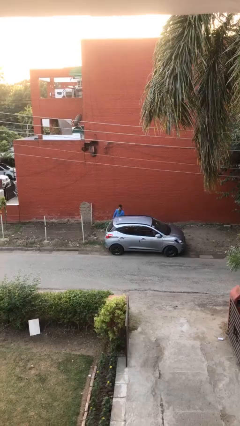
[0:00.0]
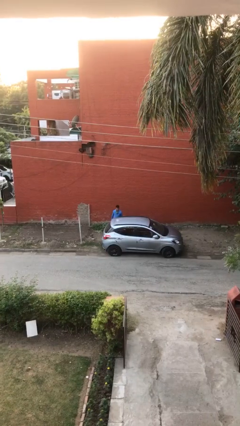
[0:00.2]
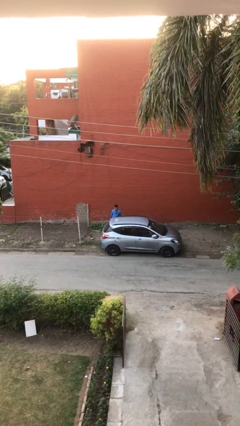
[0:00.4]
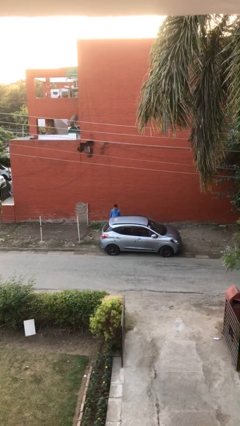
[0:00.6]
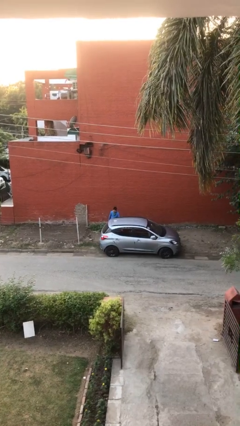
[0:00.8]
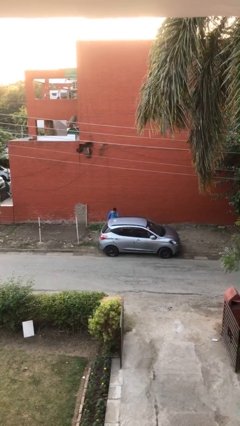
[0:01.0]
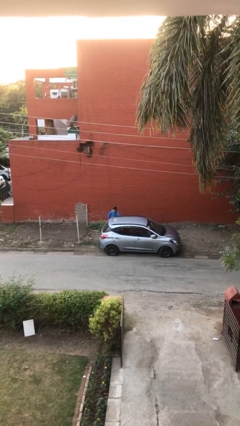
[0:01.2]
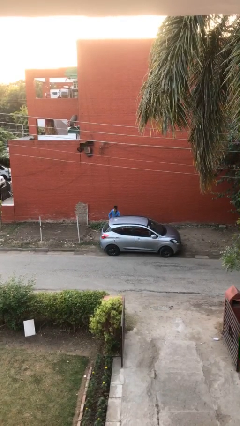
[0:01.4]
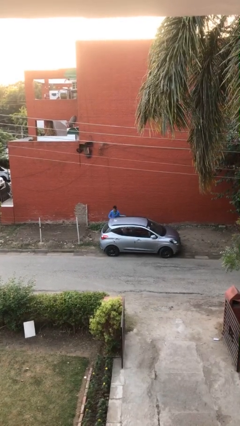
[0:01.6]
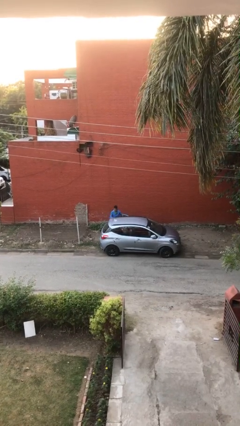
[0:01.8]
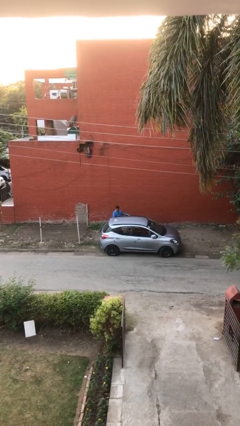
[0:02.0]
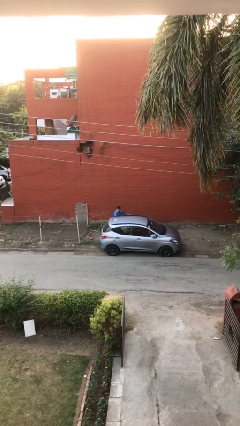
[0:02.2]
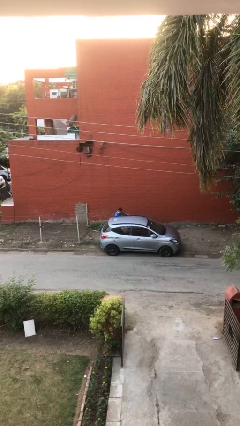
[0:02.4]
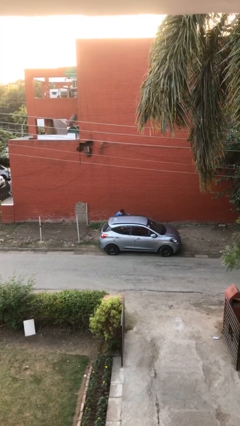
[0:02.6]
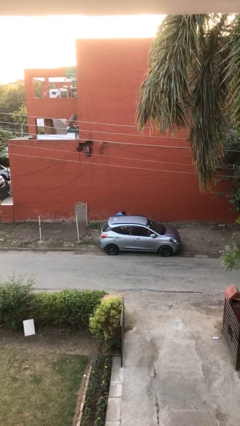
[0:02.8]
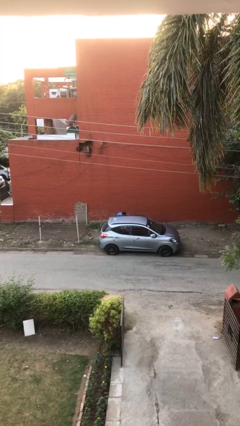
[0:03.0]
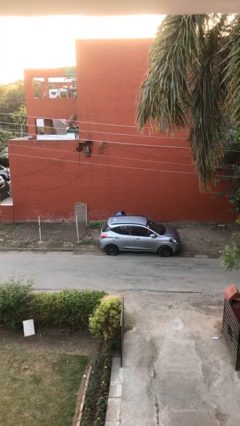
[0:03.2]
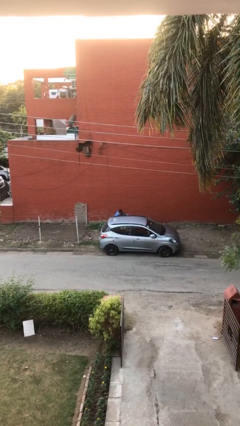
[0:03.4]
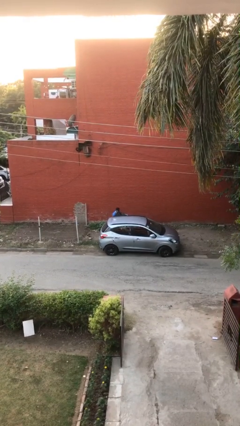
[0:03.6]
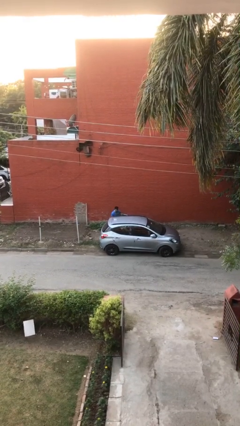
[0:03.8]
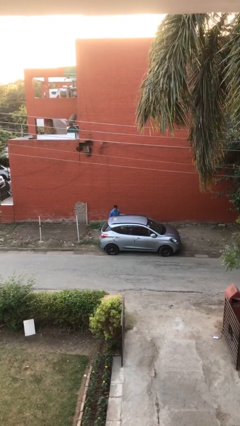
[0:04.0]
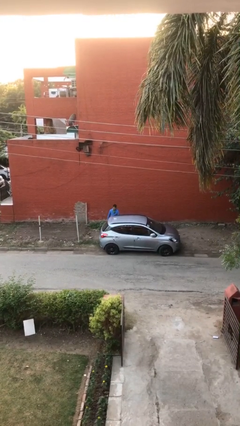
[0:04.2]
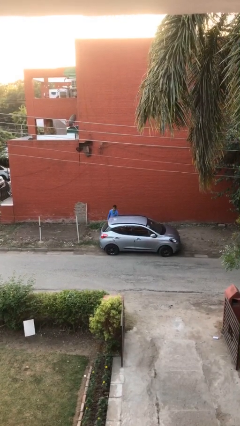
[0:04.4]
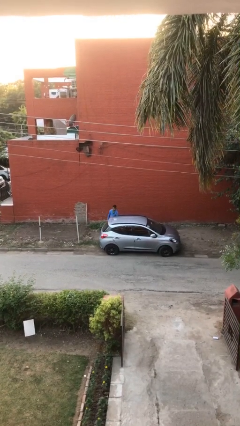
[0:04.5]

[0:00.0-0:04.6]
person loads car

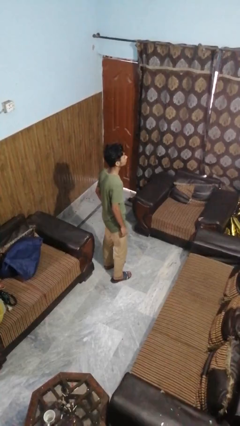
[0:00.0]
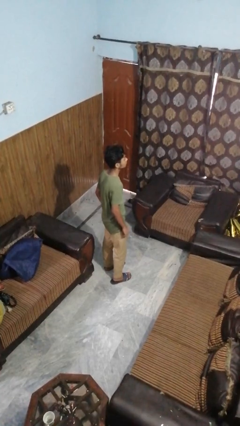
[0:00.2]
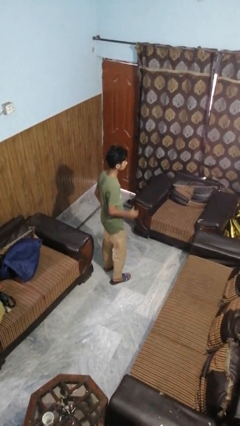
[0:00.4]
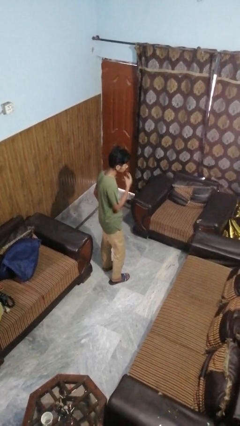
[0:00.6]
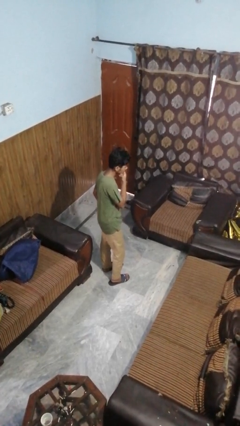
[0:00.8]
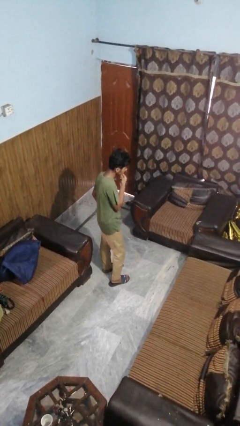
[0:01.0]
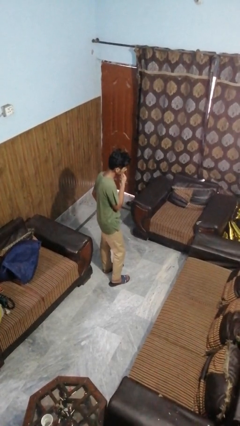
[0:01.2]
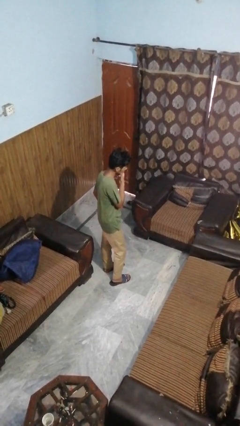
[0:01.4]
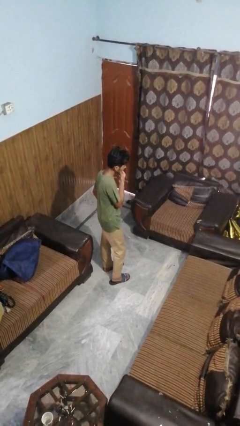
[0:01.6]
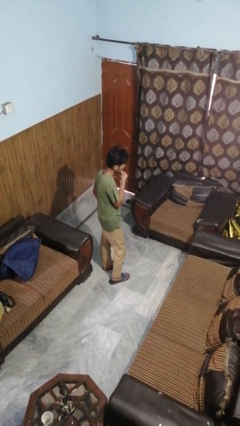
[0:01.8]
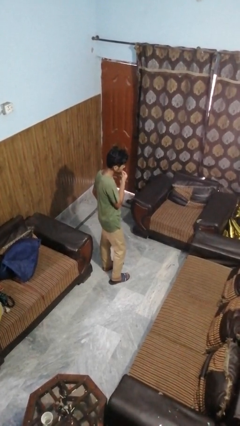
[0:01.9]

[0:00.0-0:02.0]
person strokes chin

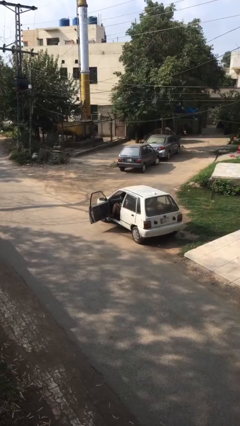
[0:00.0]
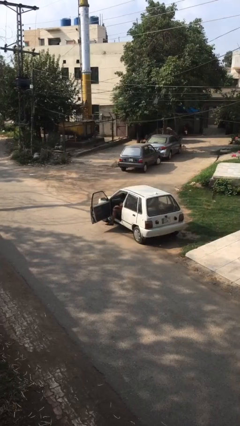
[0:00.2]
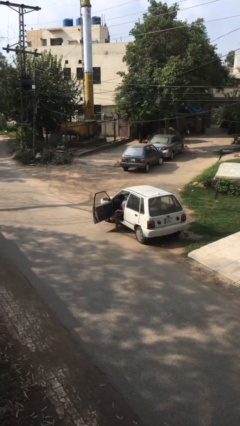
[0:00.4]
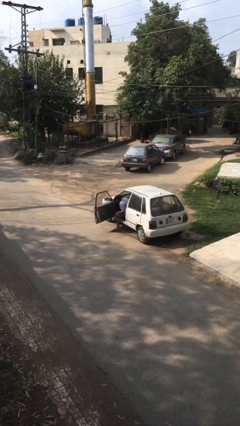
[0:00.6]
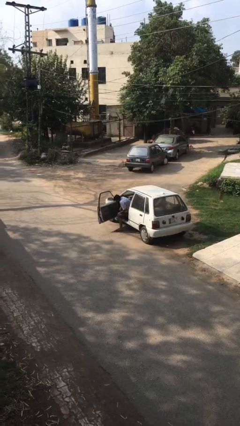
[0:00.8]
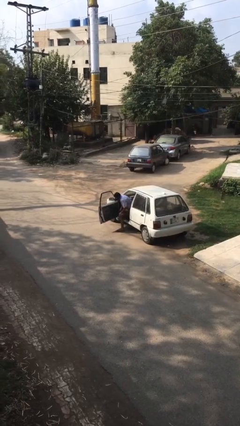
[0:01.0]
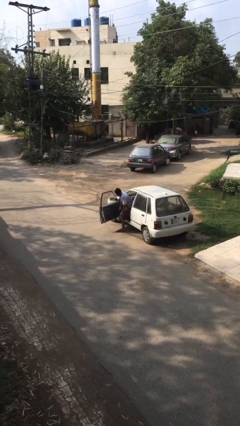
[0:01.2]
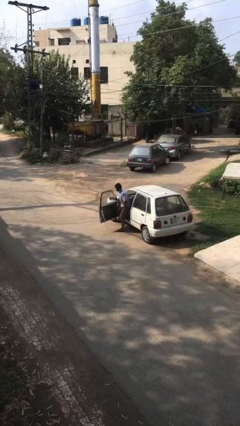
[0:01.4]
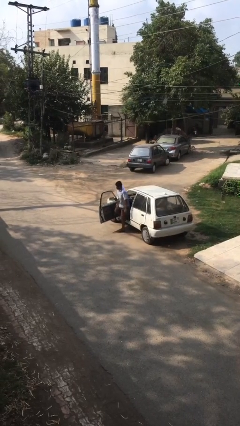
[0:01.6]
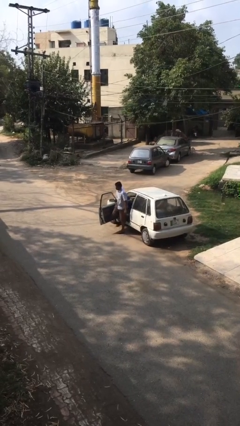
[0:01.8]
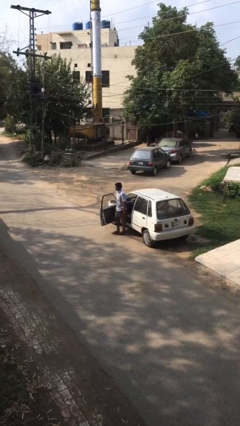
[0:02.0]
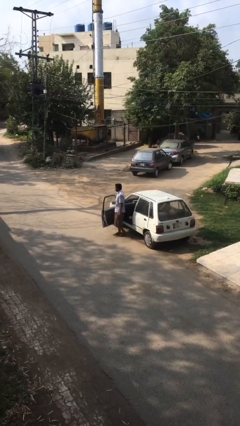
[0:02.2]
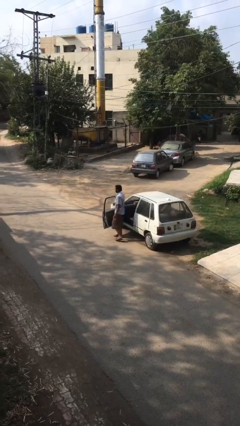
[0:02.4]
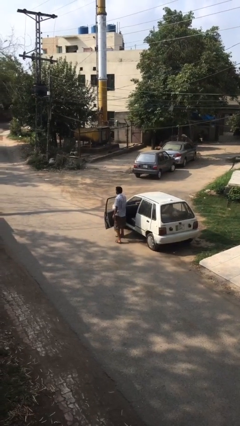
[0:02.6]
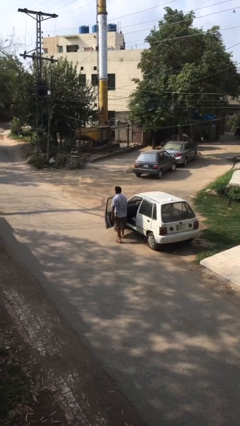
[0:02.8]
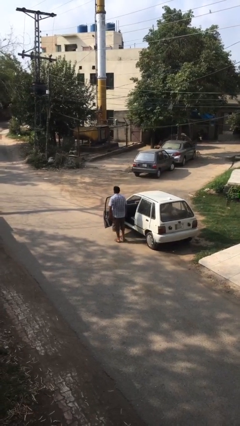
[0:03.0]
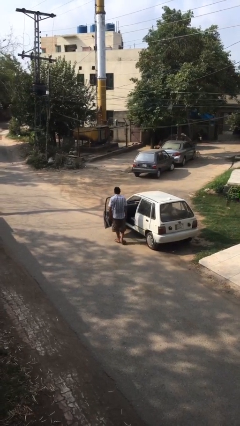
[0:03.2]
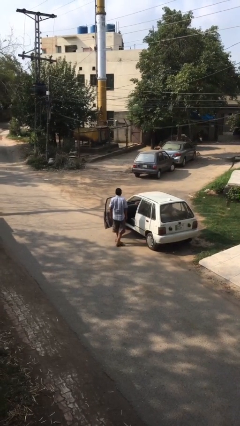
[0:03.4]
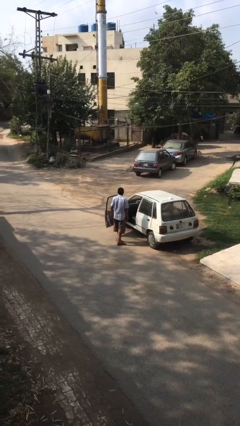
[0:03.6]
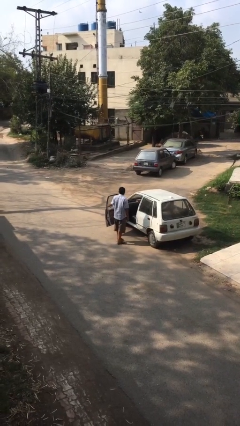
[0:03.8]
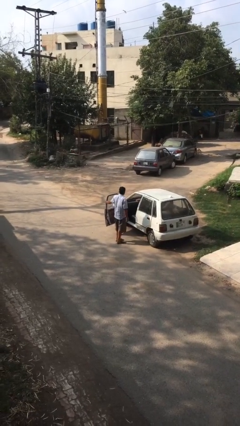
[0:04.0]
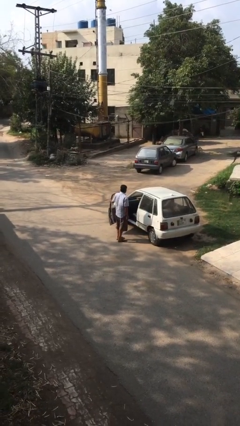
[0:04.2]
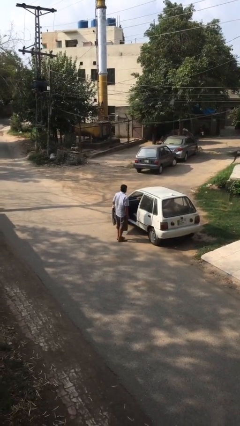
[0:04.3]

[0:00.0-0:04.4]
person exits car

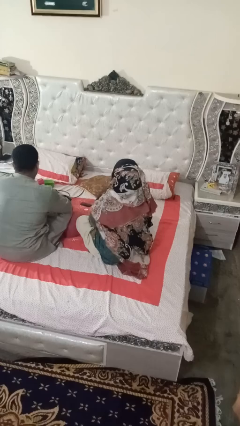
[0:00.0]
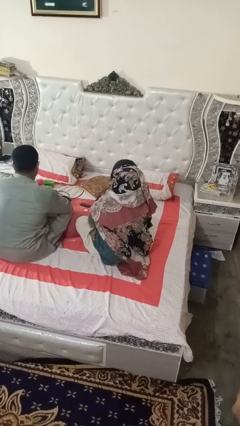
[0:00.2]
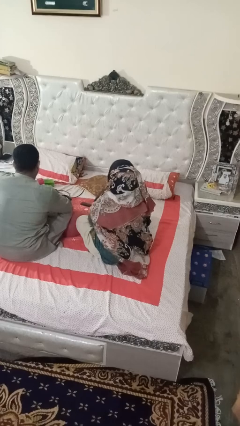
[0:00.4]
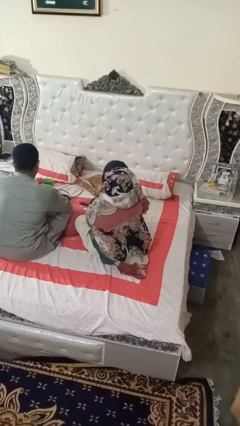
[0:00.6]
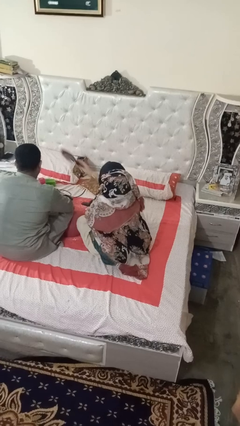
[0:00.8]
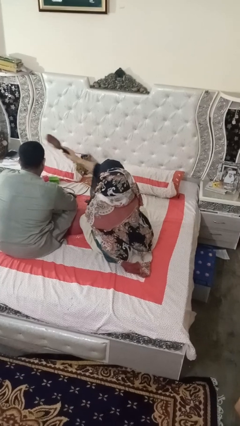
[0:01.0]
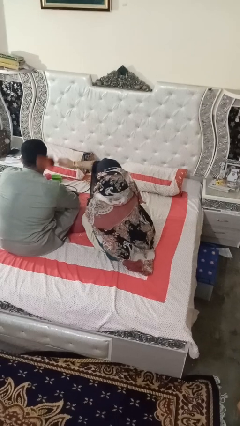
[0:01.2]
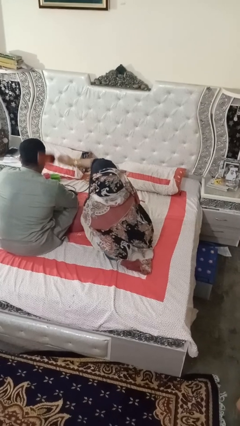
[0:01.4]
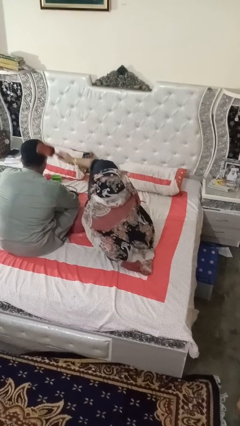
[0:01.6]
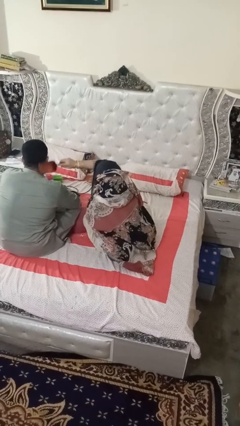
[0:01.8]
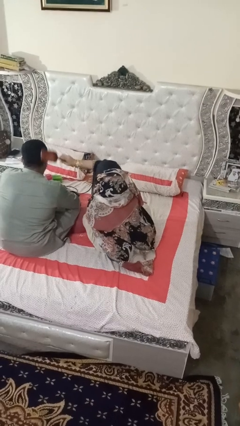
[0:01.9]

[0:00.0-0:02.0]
person brushes hair of person

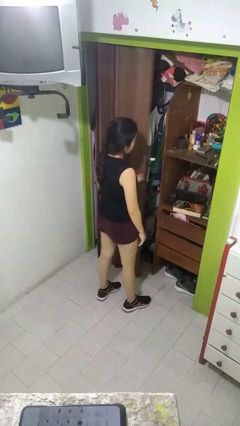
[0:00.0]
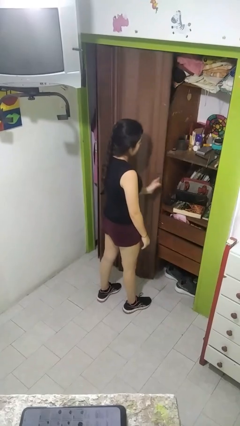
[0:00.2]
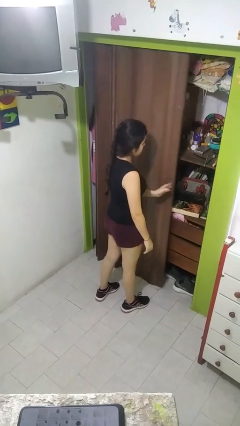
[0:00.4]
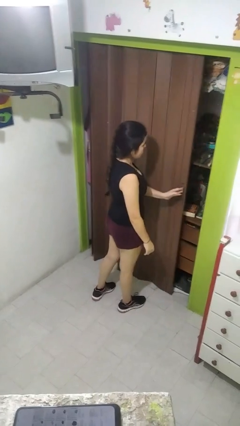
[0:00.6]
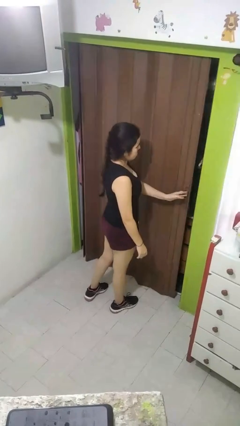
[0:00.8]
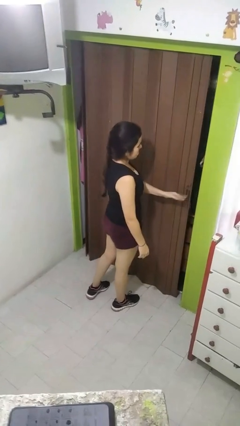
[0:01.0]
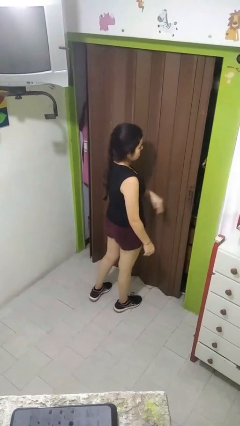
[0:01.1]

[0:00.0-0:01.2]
person closes closet door

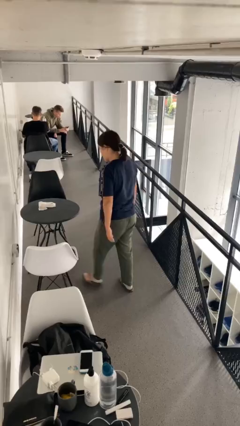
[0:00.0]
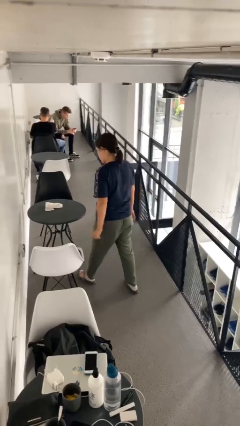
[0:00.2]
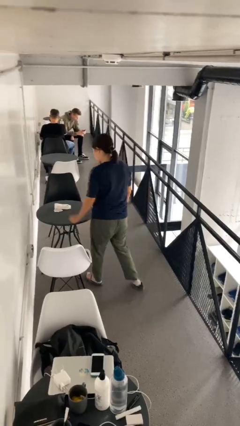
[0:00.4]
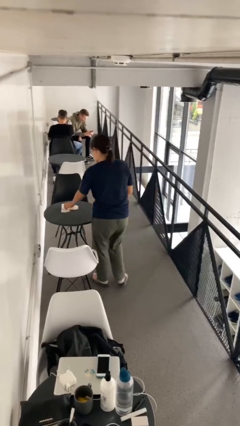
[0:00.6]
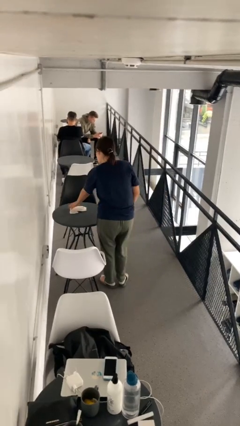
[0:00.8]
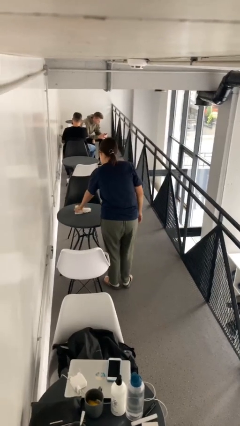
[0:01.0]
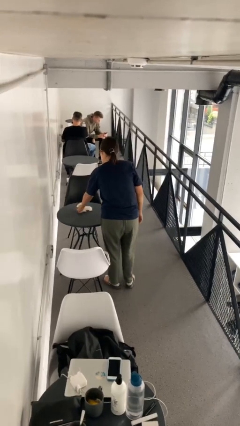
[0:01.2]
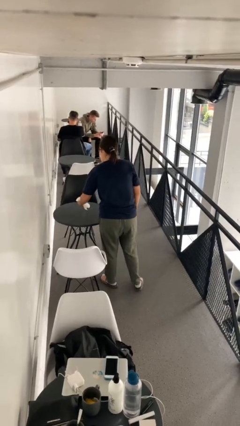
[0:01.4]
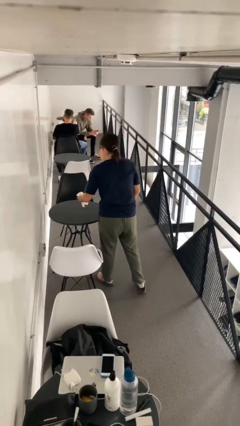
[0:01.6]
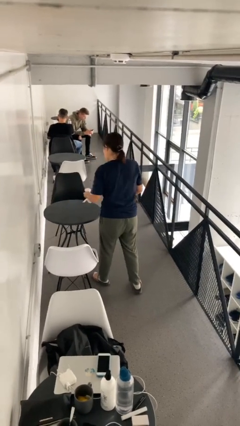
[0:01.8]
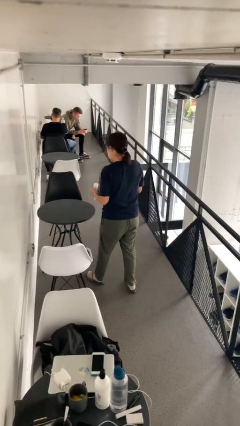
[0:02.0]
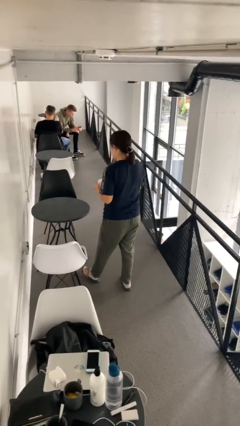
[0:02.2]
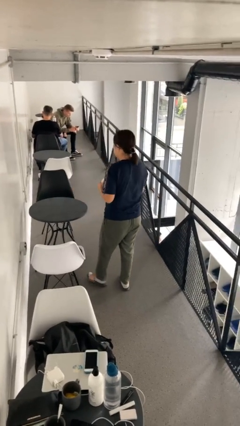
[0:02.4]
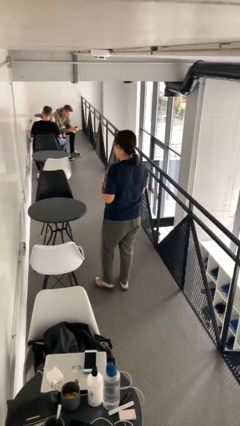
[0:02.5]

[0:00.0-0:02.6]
person picks up object from table

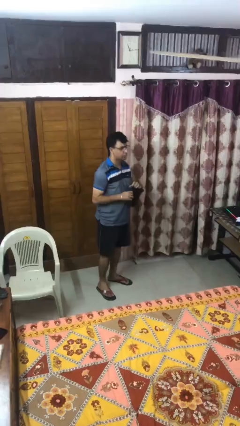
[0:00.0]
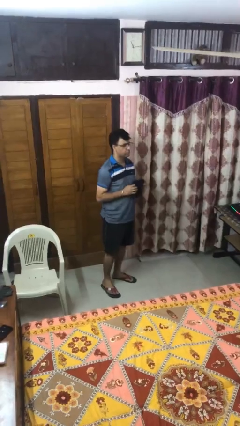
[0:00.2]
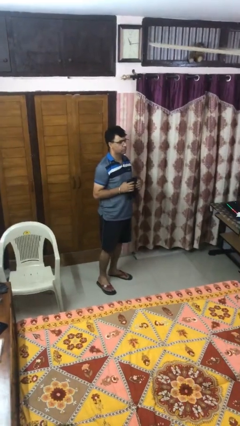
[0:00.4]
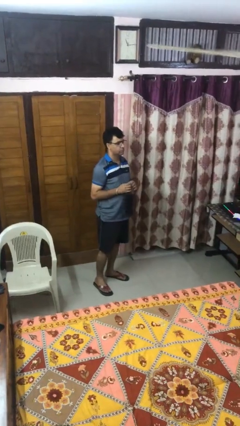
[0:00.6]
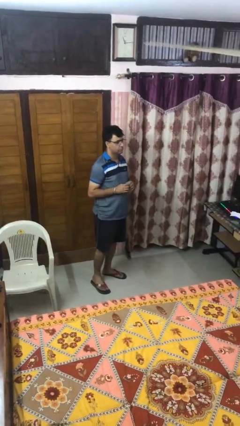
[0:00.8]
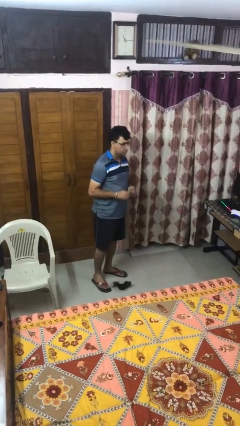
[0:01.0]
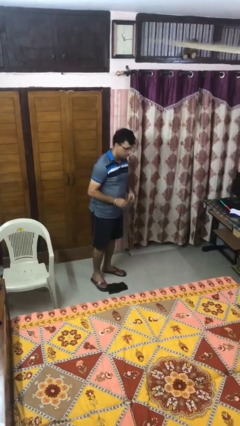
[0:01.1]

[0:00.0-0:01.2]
person drops object
